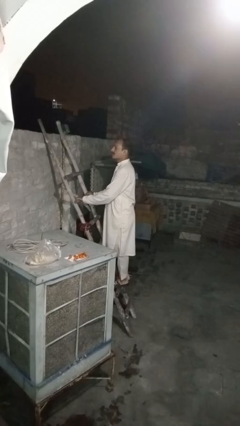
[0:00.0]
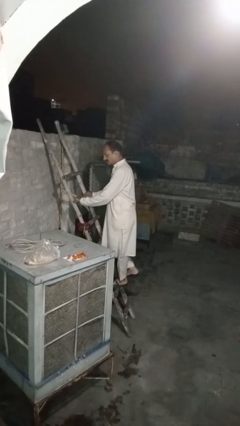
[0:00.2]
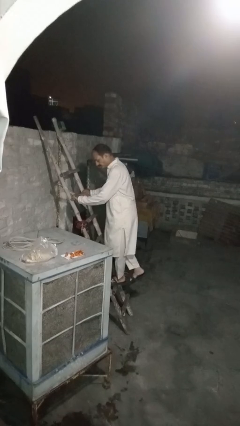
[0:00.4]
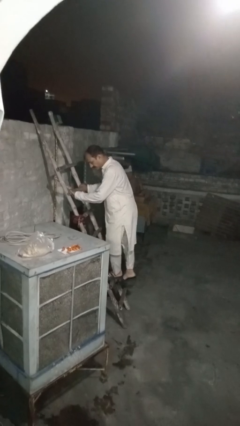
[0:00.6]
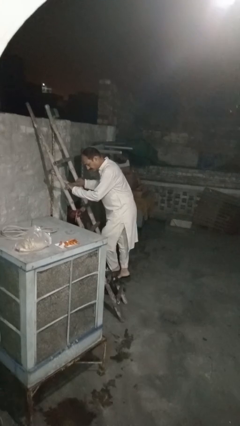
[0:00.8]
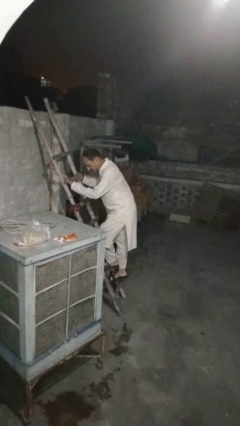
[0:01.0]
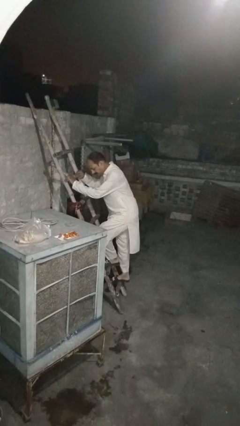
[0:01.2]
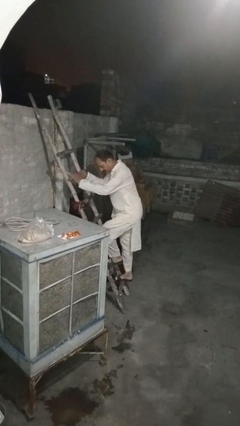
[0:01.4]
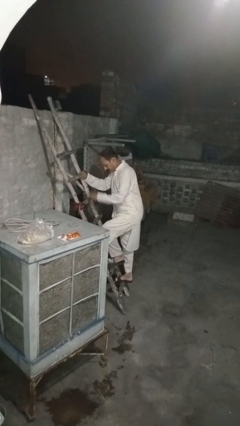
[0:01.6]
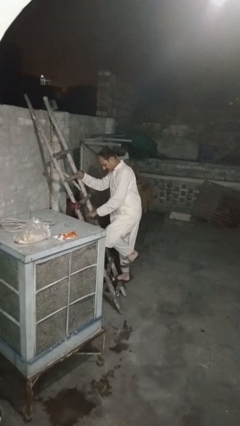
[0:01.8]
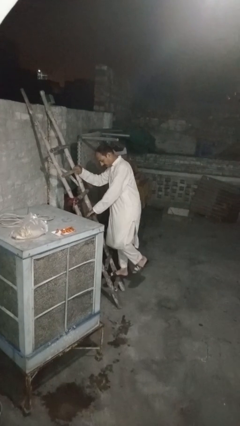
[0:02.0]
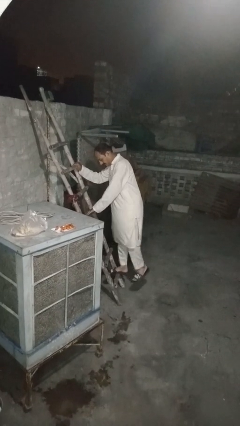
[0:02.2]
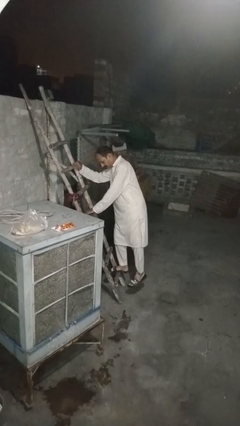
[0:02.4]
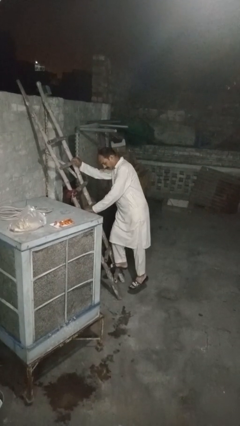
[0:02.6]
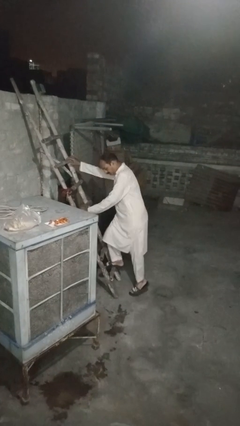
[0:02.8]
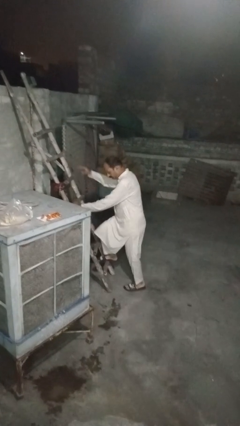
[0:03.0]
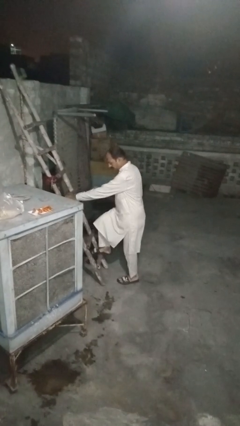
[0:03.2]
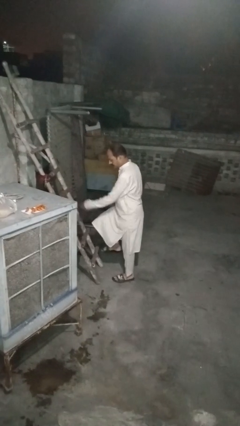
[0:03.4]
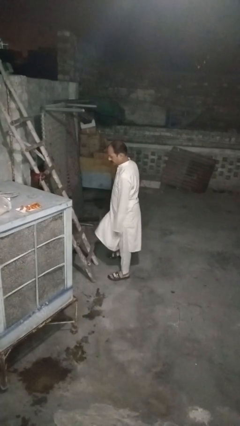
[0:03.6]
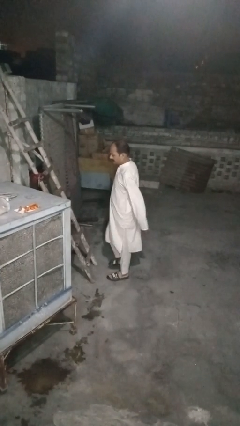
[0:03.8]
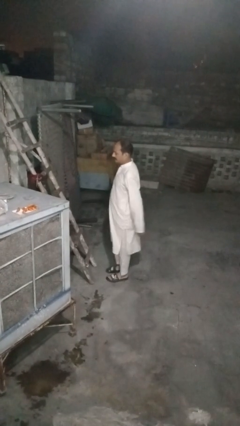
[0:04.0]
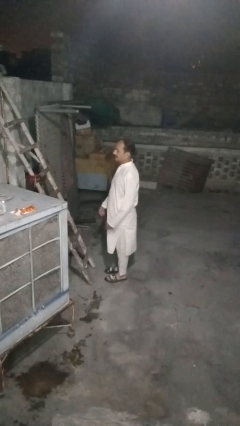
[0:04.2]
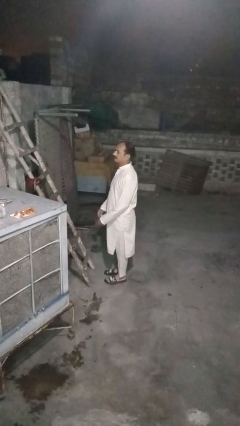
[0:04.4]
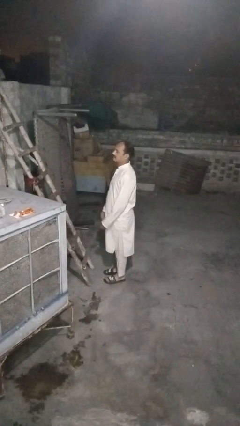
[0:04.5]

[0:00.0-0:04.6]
person climbs down ladder

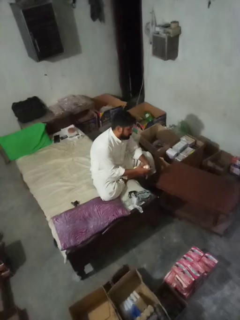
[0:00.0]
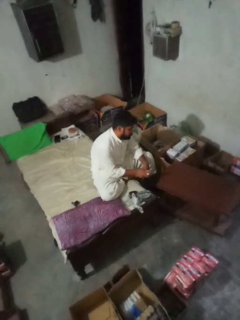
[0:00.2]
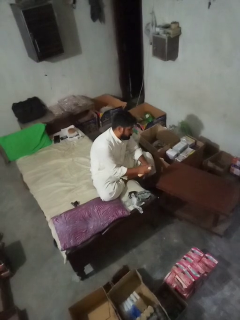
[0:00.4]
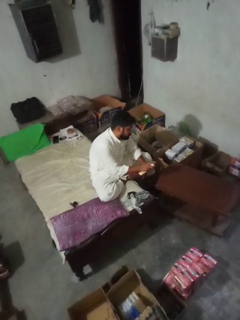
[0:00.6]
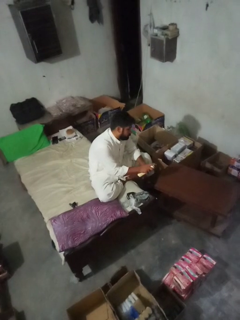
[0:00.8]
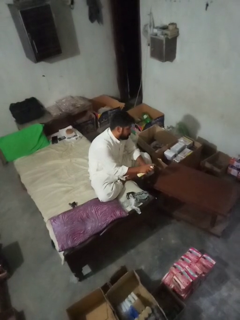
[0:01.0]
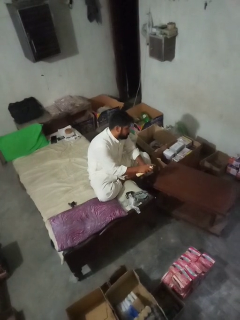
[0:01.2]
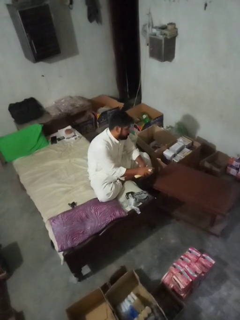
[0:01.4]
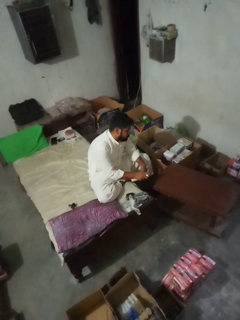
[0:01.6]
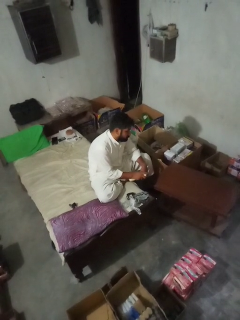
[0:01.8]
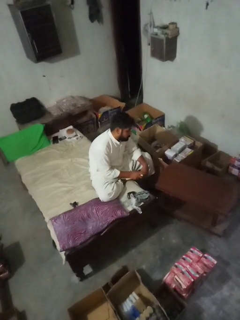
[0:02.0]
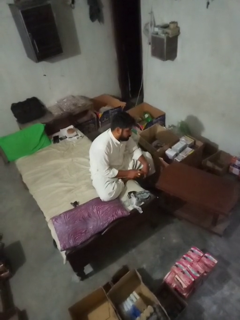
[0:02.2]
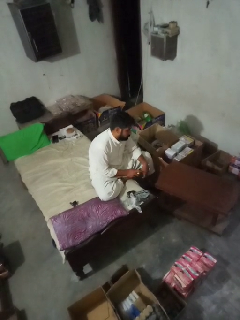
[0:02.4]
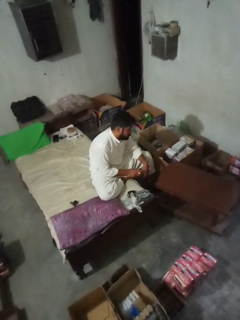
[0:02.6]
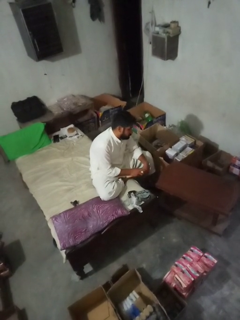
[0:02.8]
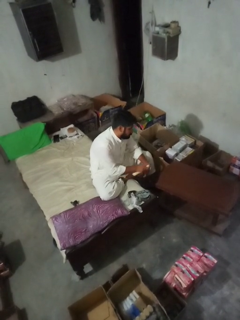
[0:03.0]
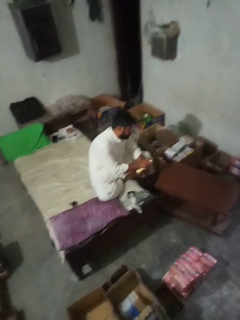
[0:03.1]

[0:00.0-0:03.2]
person sprays from bottle

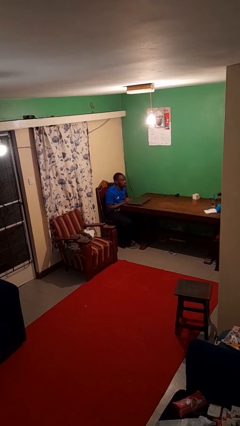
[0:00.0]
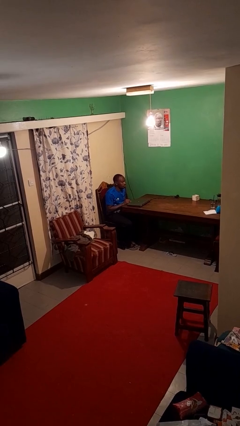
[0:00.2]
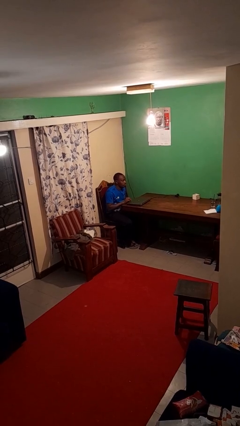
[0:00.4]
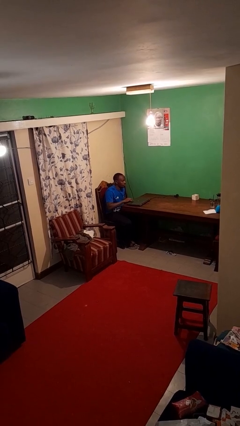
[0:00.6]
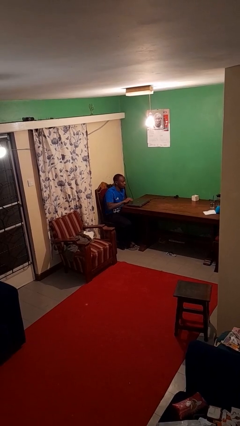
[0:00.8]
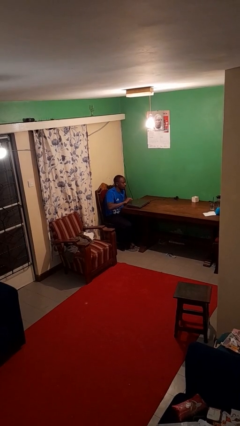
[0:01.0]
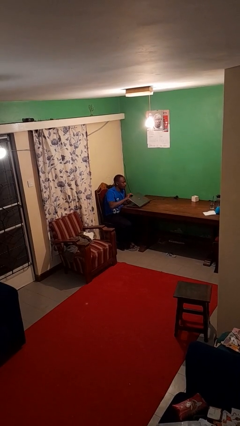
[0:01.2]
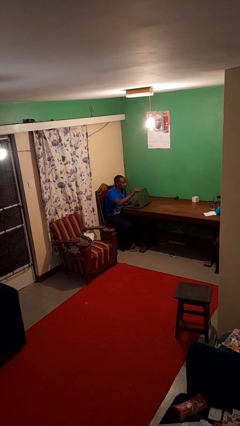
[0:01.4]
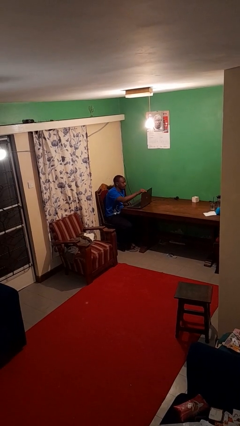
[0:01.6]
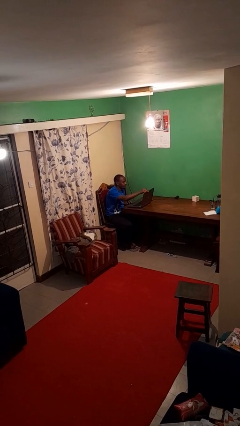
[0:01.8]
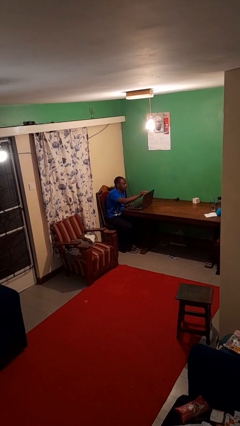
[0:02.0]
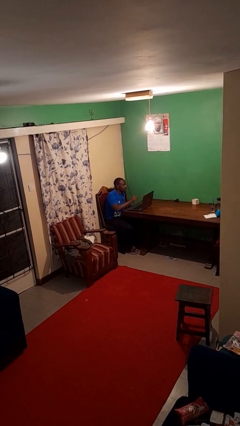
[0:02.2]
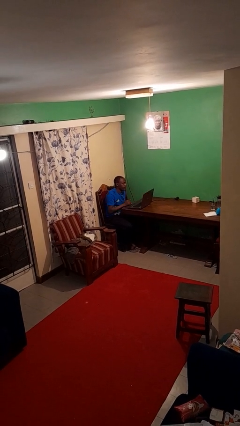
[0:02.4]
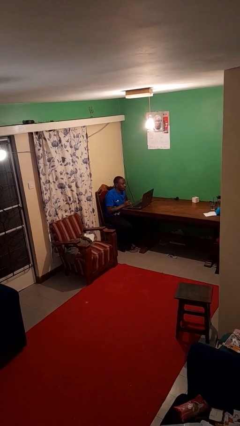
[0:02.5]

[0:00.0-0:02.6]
person opens laptop

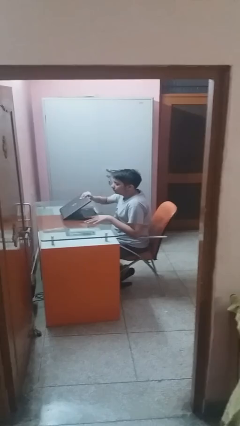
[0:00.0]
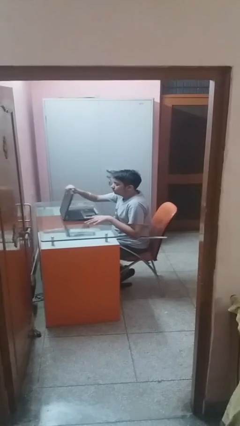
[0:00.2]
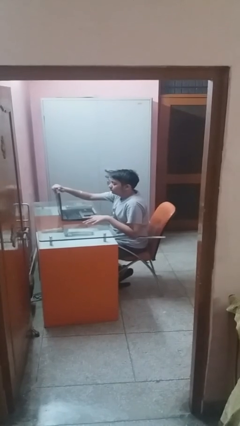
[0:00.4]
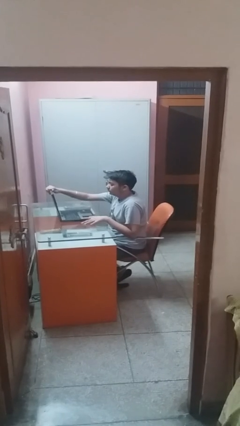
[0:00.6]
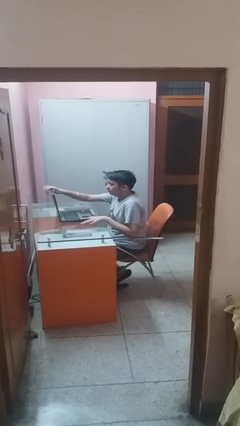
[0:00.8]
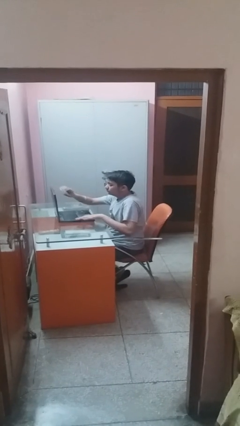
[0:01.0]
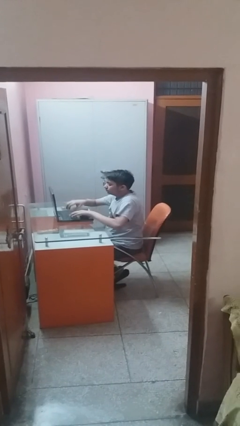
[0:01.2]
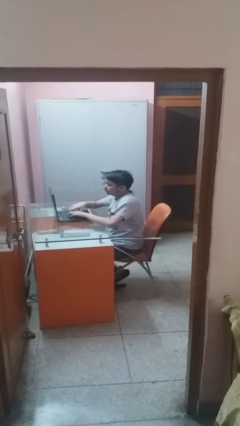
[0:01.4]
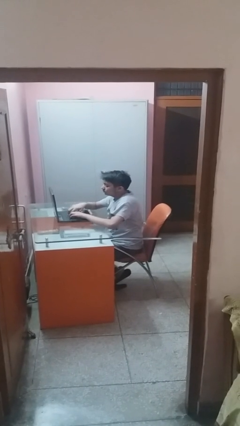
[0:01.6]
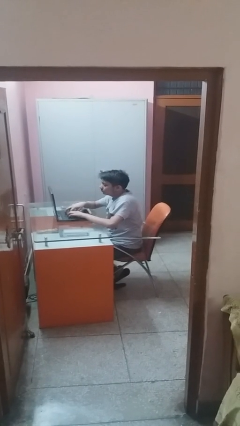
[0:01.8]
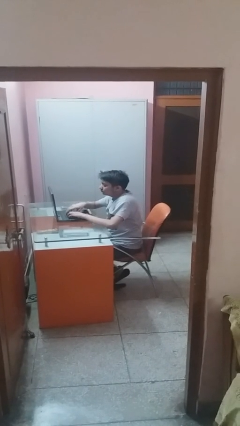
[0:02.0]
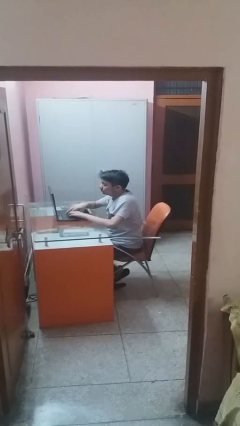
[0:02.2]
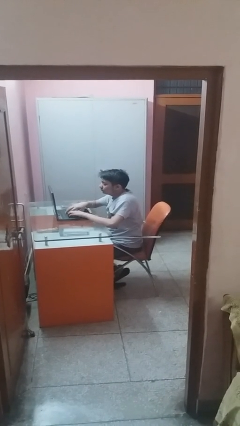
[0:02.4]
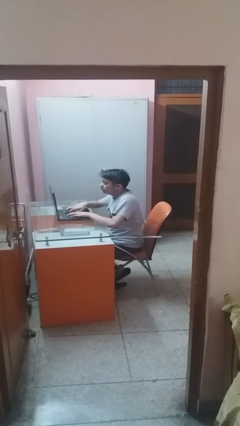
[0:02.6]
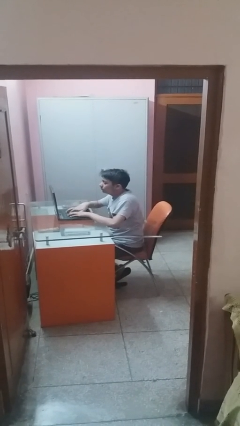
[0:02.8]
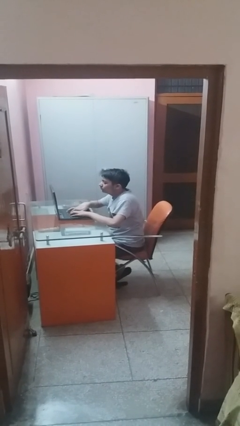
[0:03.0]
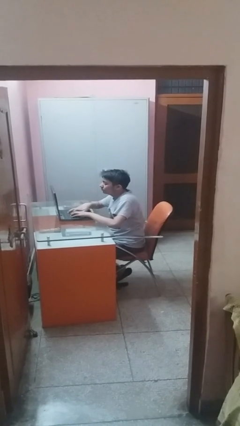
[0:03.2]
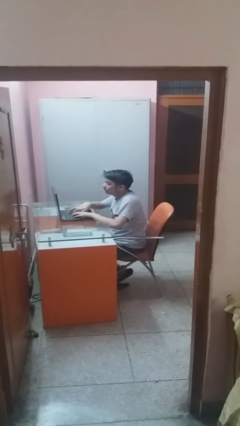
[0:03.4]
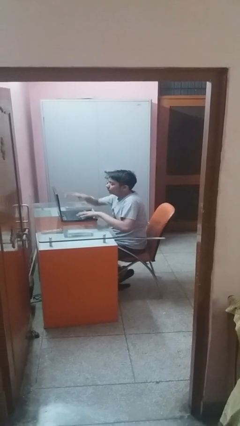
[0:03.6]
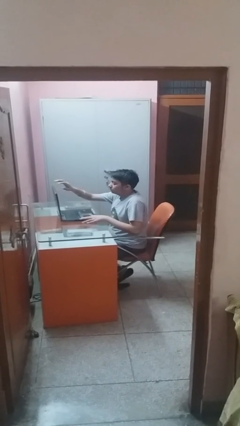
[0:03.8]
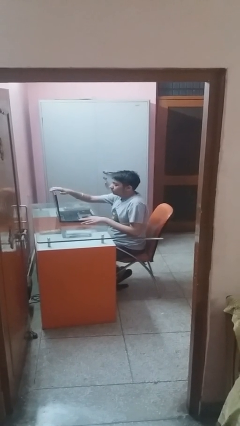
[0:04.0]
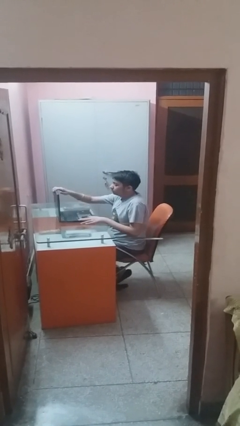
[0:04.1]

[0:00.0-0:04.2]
person interacts with laptop

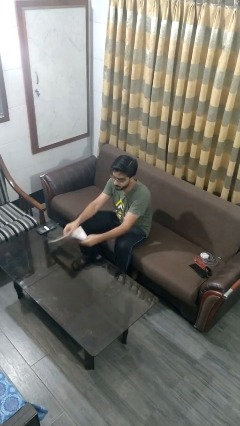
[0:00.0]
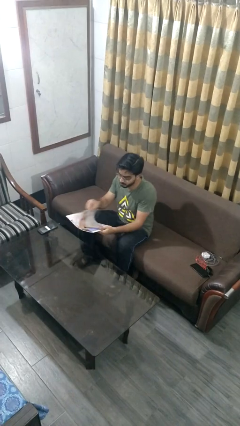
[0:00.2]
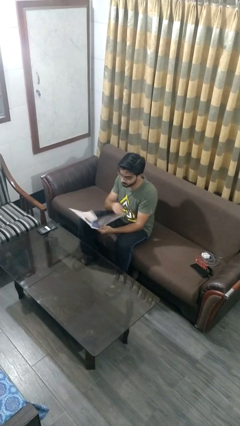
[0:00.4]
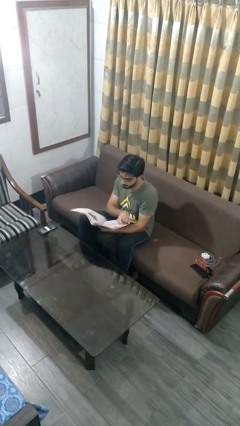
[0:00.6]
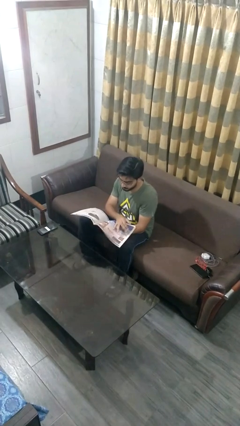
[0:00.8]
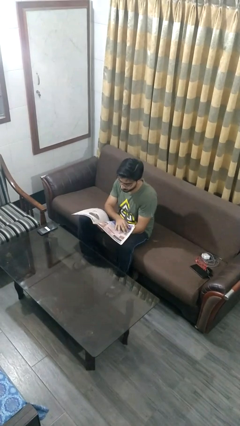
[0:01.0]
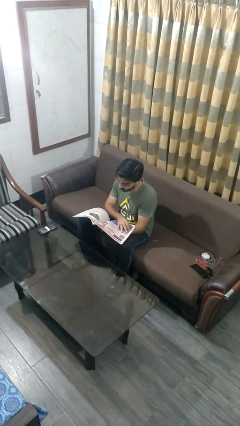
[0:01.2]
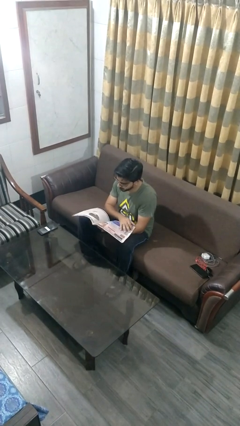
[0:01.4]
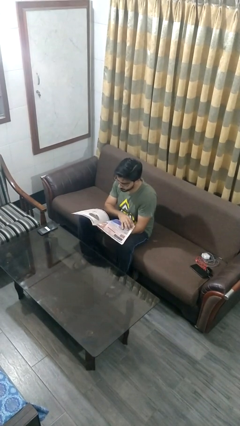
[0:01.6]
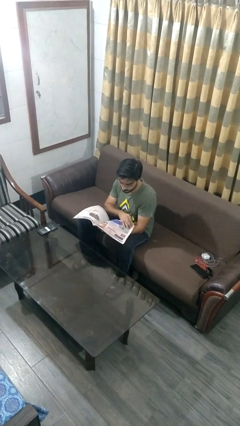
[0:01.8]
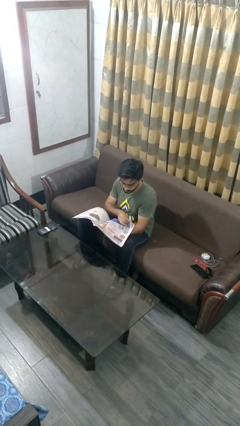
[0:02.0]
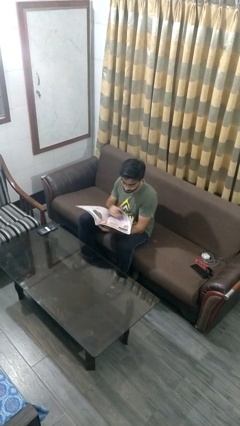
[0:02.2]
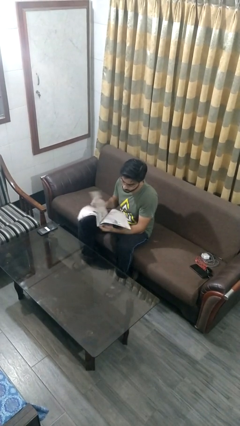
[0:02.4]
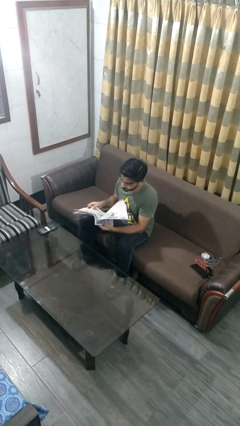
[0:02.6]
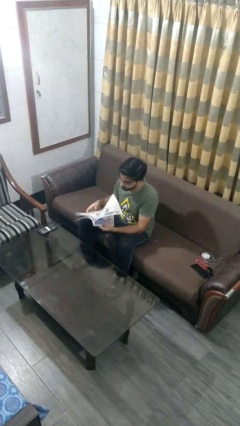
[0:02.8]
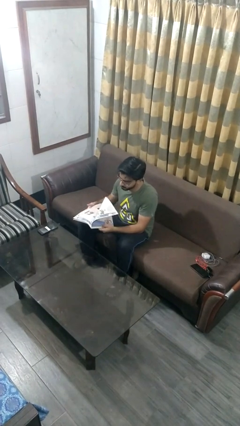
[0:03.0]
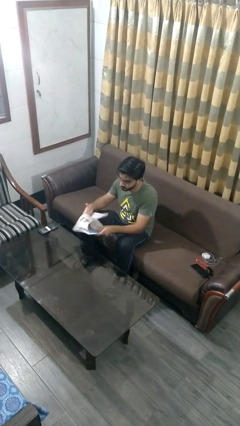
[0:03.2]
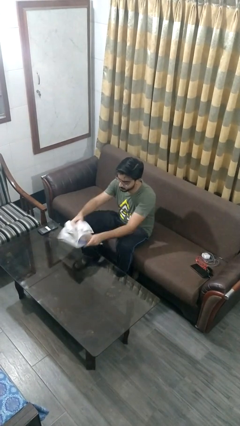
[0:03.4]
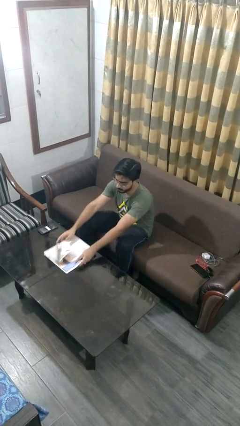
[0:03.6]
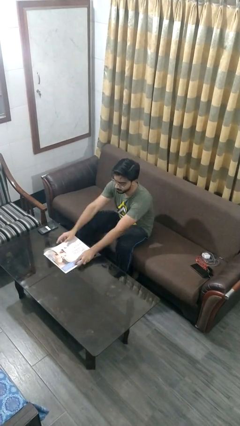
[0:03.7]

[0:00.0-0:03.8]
person reads magazine

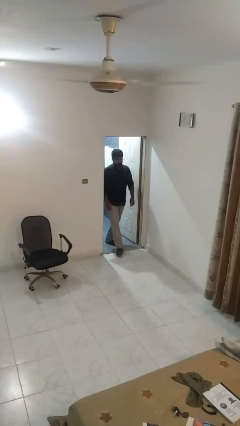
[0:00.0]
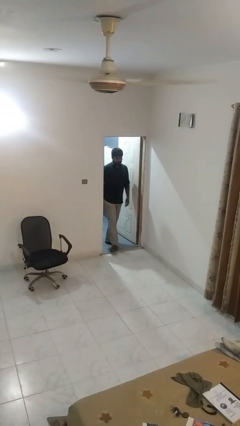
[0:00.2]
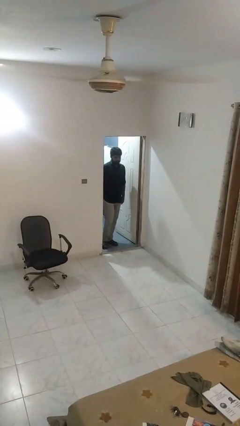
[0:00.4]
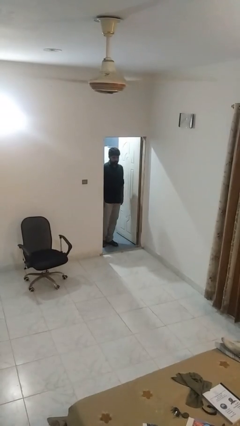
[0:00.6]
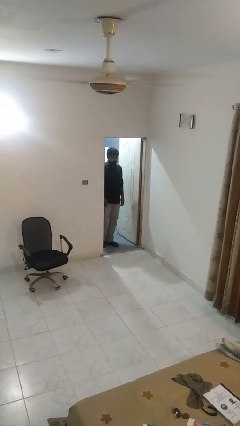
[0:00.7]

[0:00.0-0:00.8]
person bumps into wall
